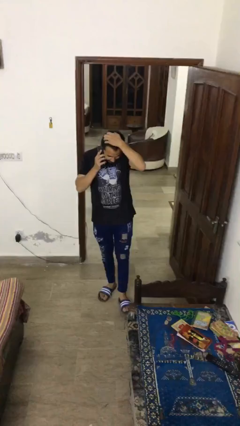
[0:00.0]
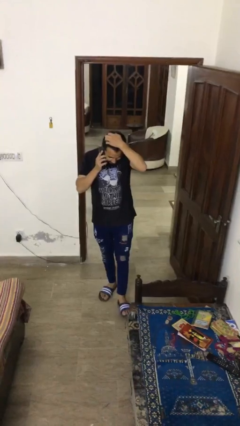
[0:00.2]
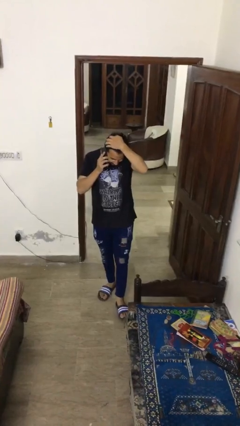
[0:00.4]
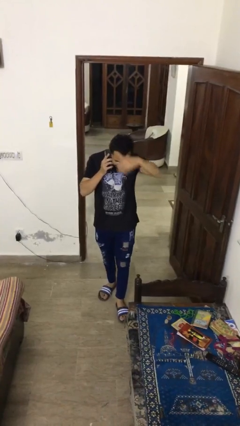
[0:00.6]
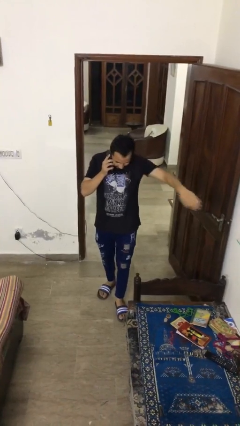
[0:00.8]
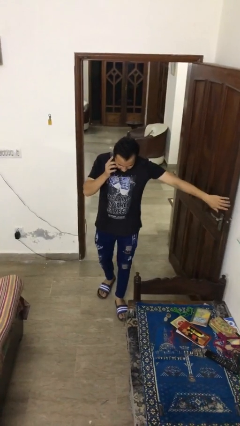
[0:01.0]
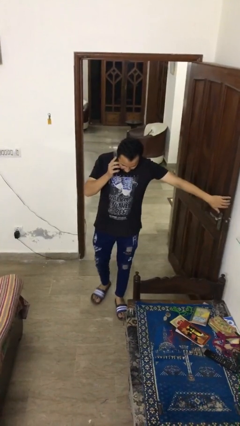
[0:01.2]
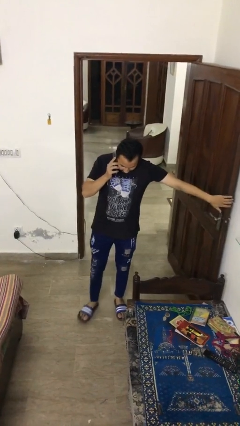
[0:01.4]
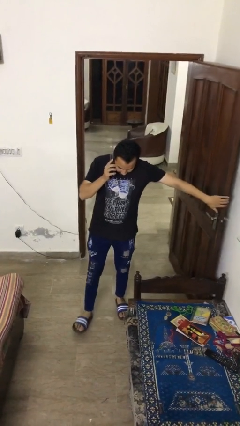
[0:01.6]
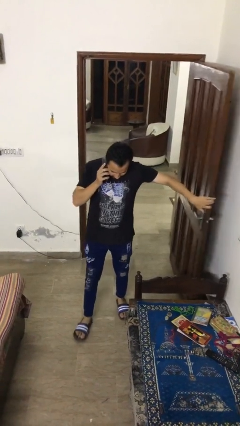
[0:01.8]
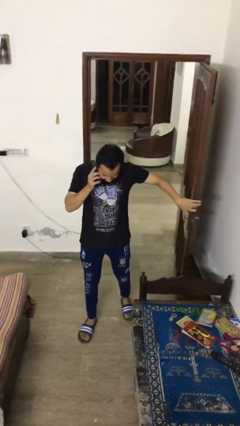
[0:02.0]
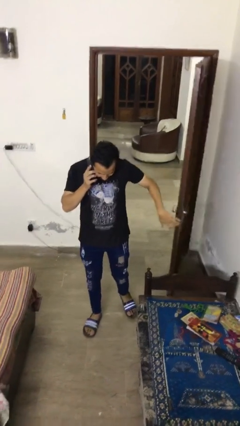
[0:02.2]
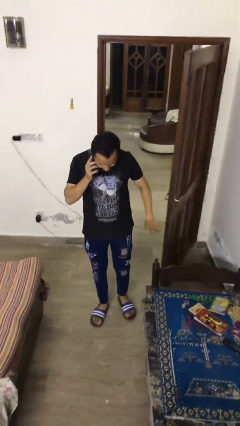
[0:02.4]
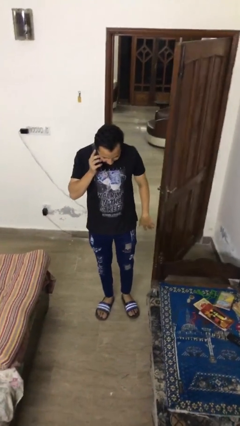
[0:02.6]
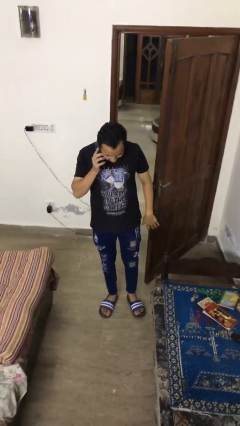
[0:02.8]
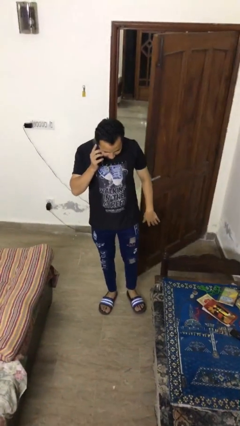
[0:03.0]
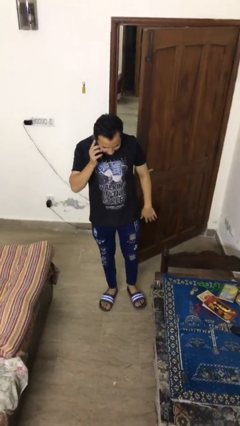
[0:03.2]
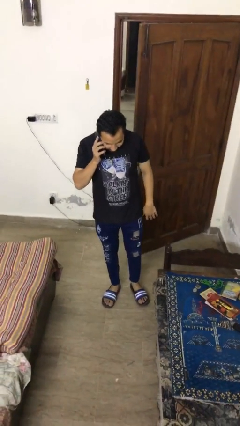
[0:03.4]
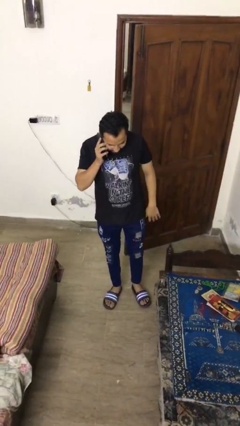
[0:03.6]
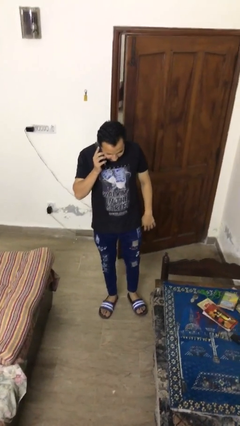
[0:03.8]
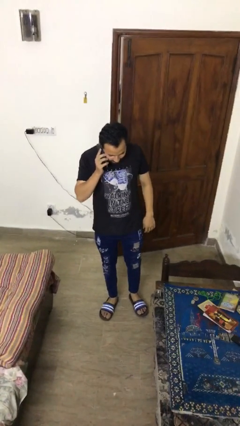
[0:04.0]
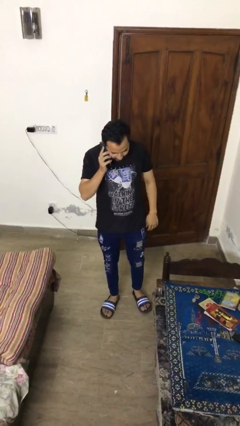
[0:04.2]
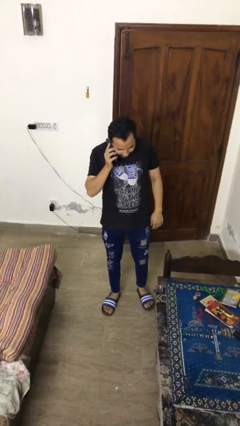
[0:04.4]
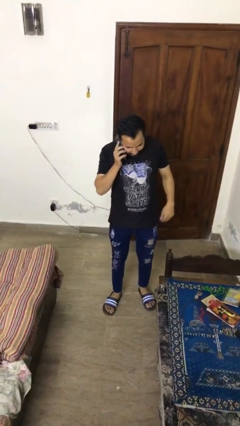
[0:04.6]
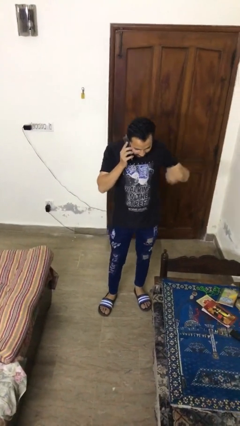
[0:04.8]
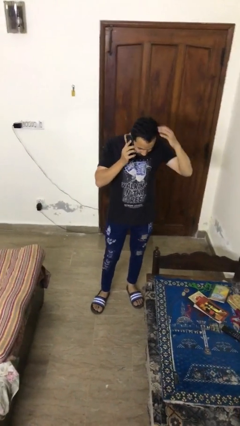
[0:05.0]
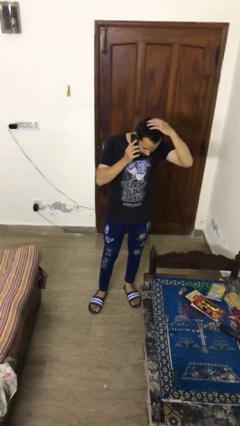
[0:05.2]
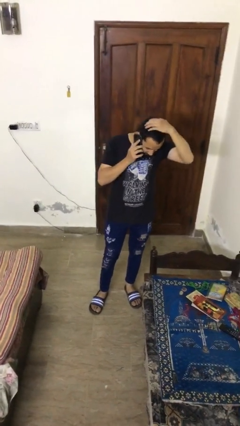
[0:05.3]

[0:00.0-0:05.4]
person closes facility door

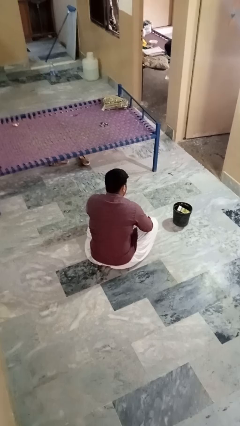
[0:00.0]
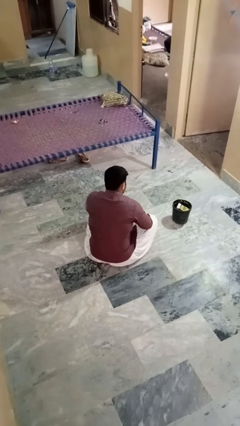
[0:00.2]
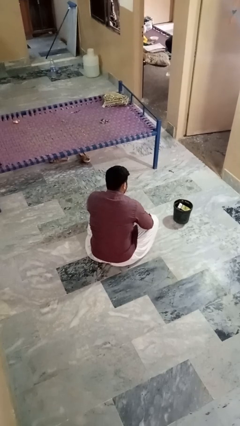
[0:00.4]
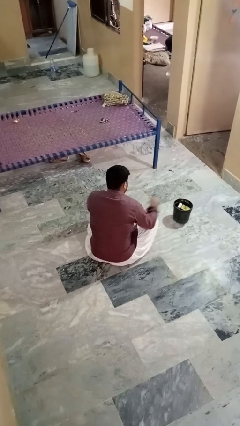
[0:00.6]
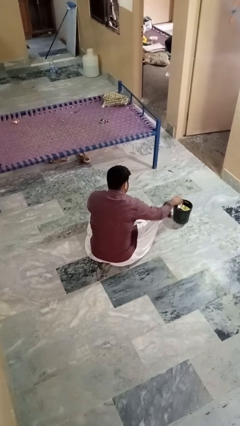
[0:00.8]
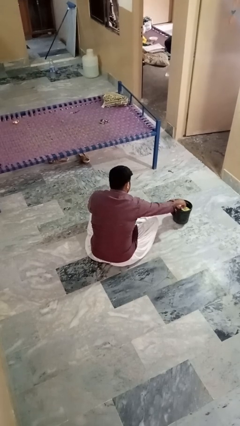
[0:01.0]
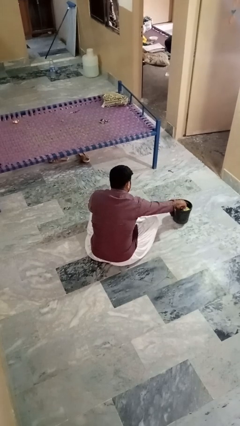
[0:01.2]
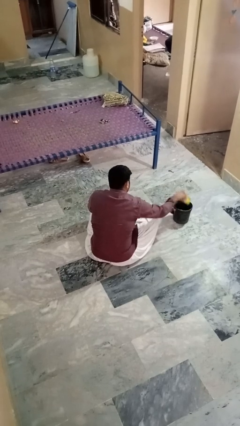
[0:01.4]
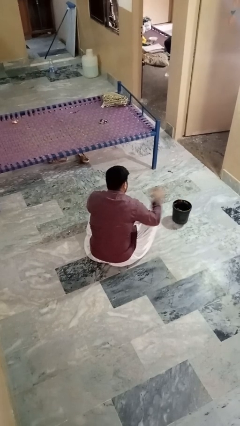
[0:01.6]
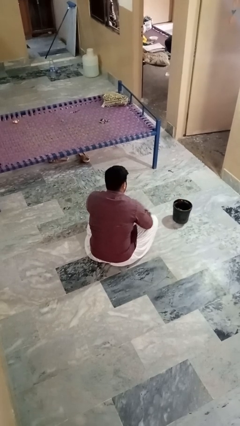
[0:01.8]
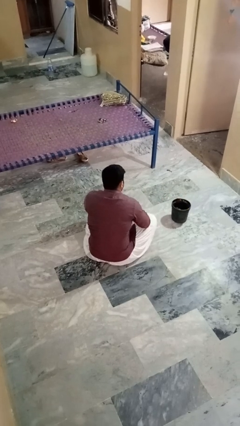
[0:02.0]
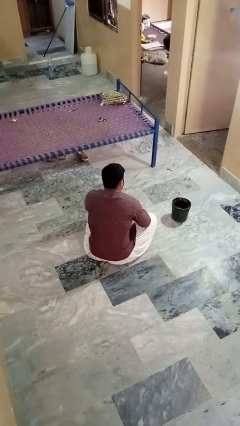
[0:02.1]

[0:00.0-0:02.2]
person takes object from basket

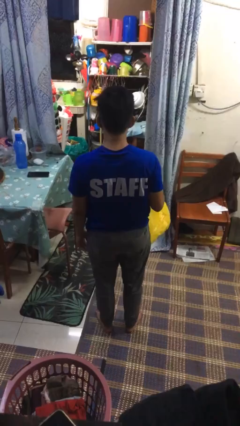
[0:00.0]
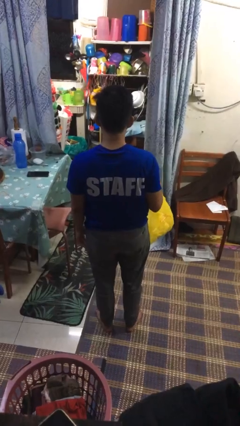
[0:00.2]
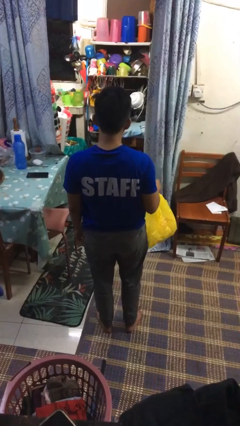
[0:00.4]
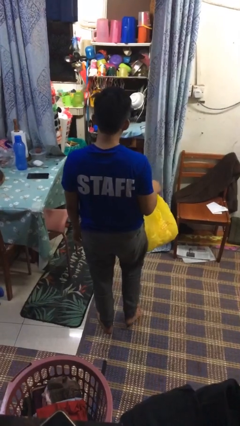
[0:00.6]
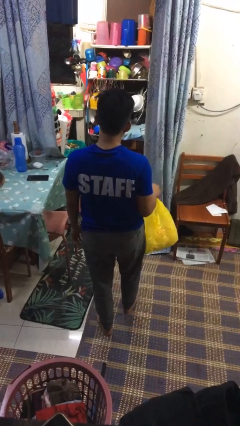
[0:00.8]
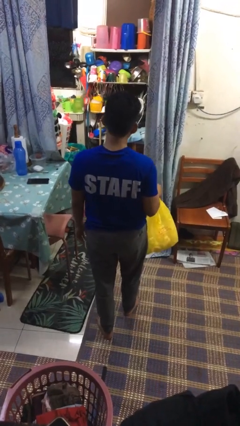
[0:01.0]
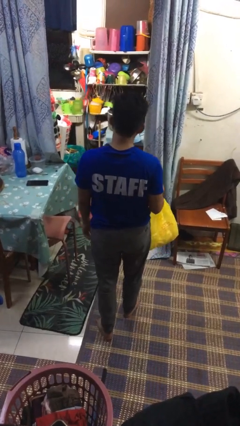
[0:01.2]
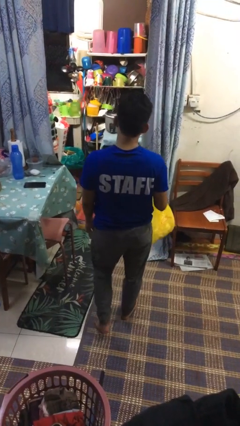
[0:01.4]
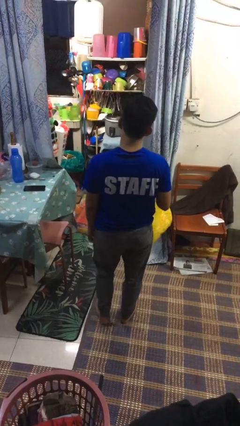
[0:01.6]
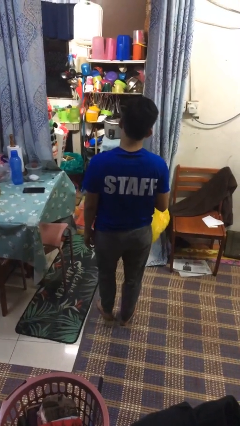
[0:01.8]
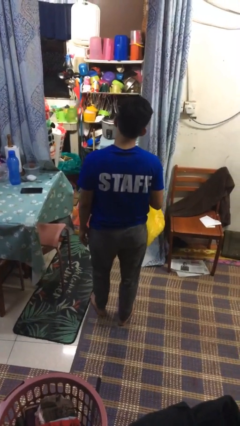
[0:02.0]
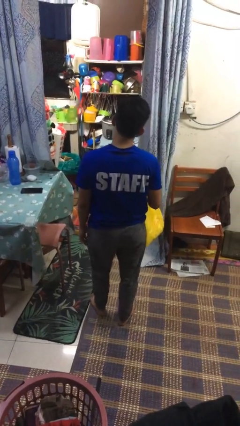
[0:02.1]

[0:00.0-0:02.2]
person carries groceries

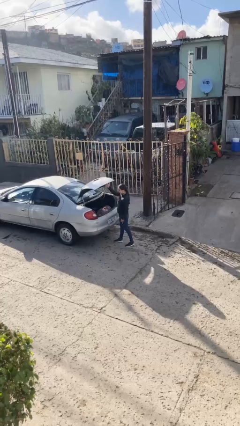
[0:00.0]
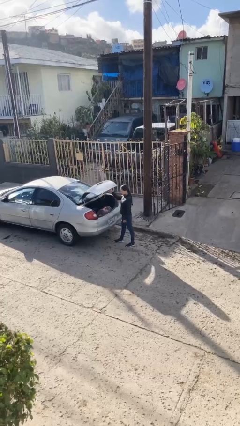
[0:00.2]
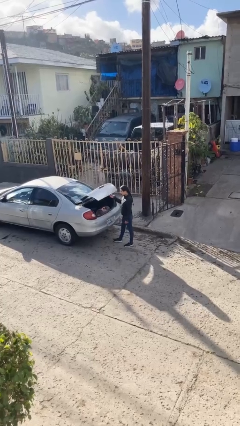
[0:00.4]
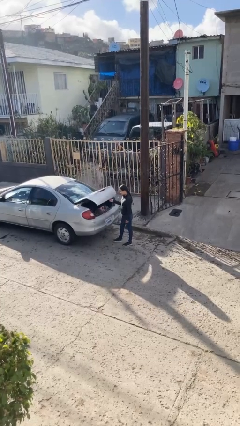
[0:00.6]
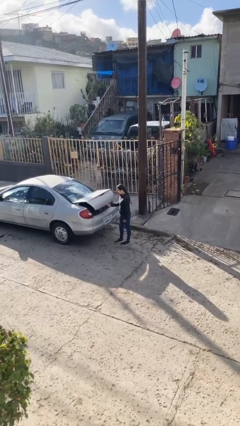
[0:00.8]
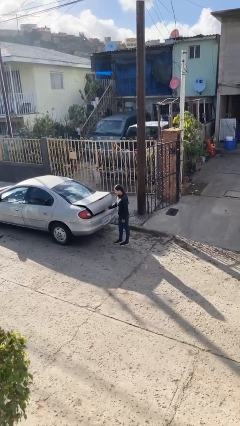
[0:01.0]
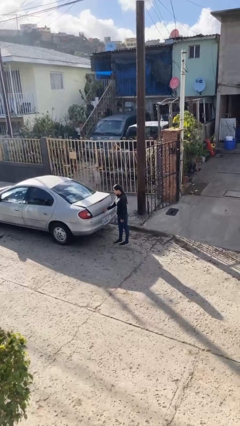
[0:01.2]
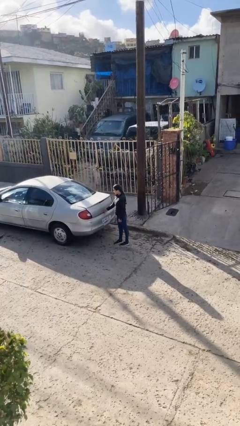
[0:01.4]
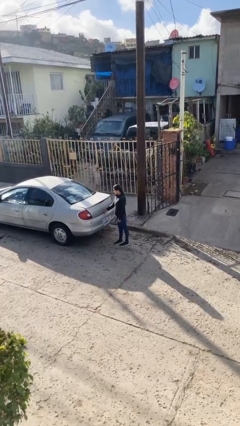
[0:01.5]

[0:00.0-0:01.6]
person closes car trunk

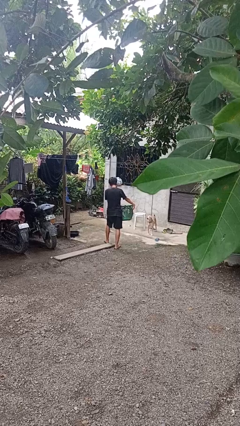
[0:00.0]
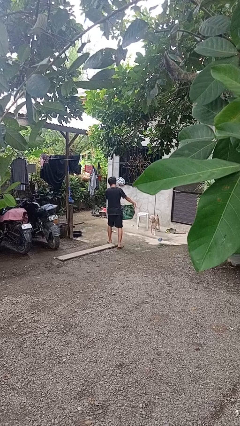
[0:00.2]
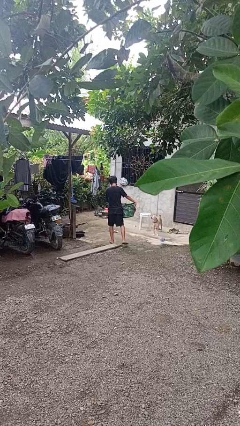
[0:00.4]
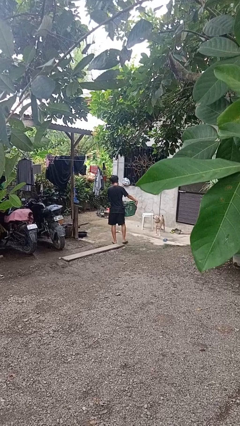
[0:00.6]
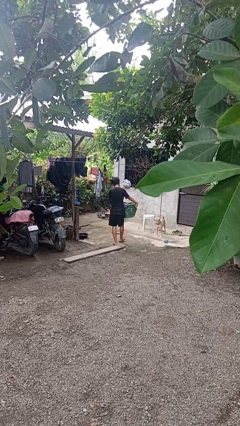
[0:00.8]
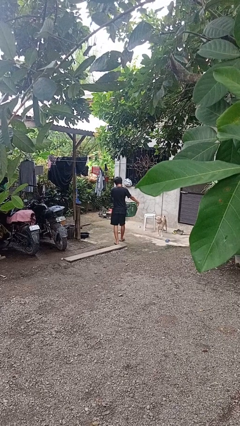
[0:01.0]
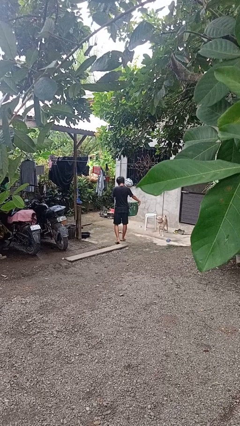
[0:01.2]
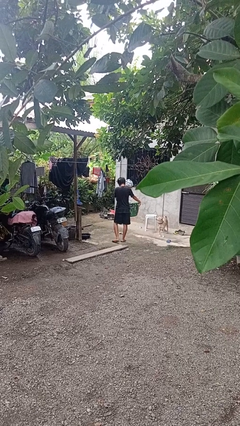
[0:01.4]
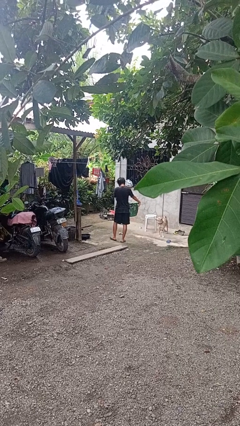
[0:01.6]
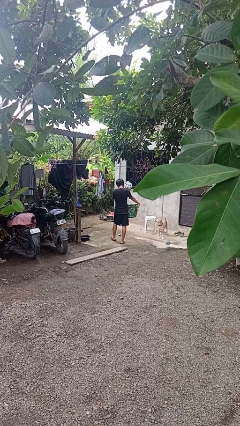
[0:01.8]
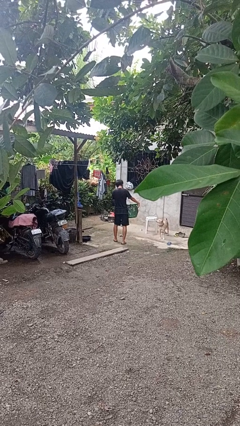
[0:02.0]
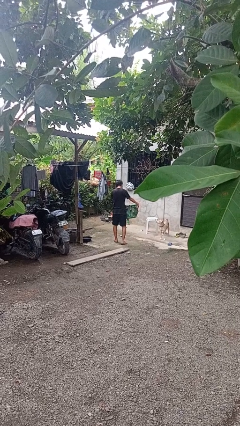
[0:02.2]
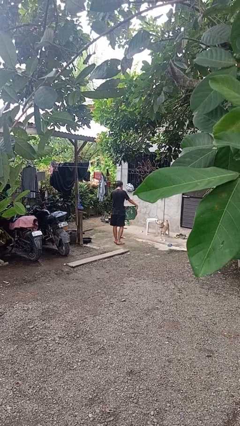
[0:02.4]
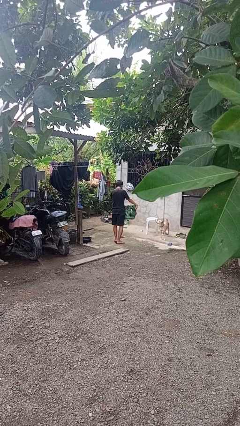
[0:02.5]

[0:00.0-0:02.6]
person carries laundry basket

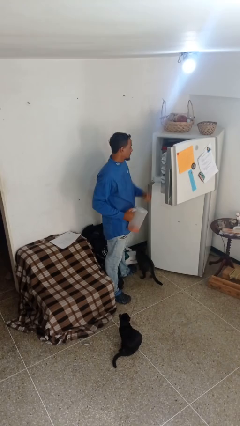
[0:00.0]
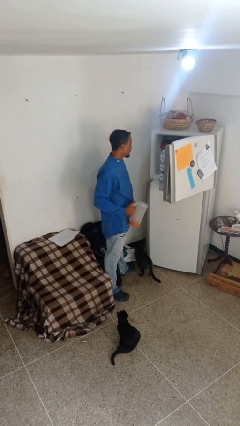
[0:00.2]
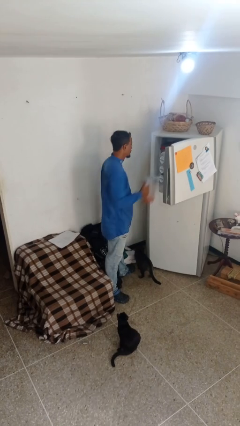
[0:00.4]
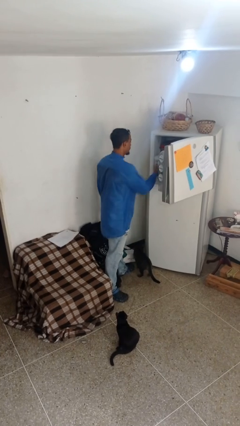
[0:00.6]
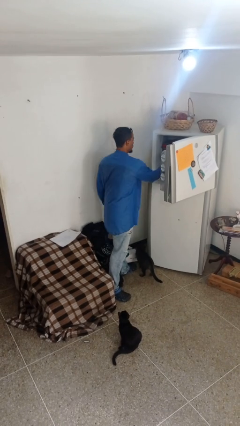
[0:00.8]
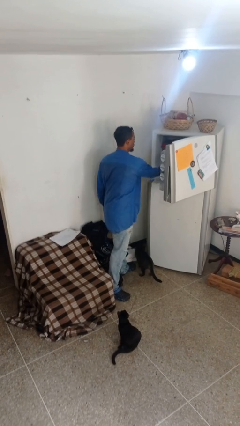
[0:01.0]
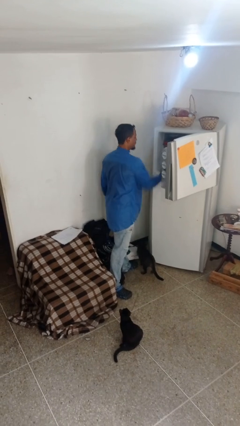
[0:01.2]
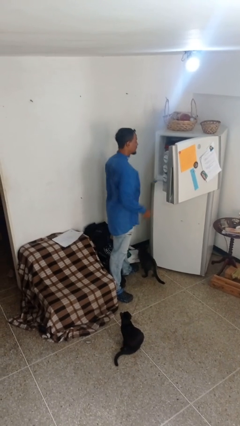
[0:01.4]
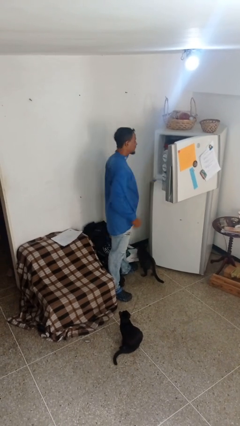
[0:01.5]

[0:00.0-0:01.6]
person puts object into refrigerator

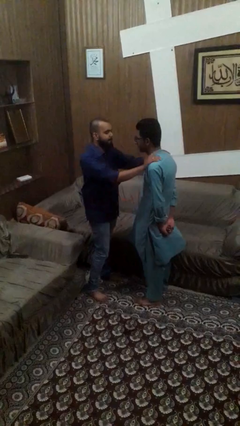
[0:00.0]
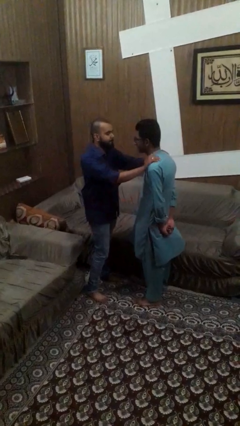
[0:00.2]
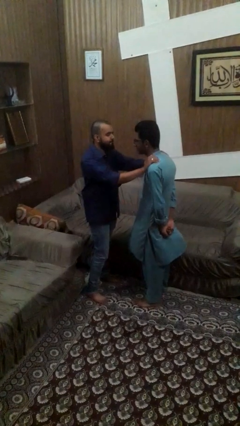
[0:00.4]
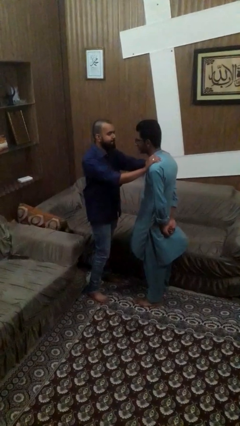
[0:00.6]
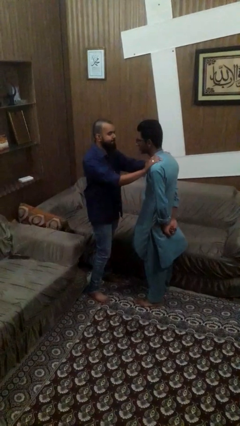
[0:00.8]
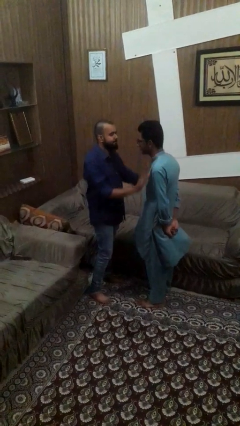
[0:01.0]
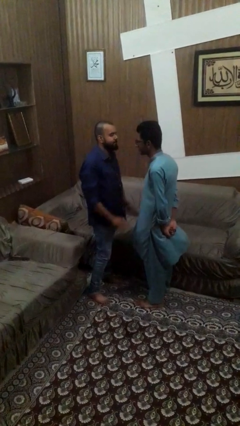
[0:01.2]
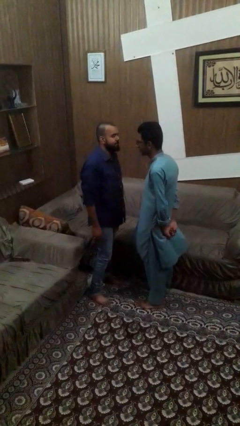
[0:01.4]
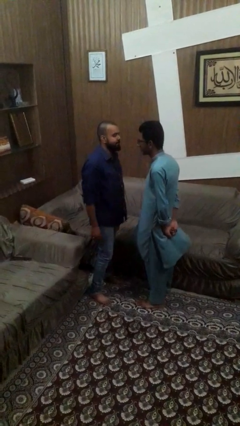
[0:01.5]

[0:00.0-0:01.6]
person pounds shoulders of person
